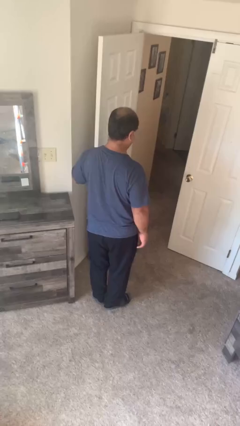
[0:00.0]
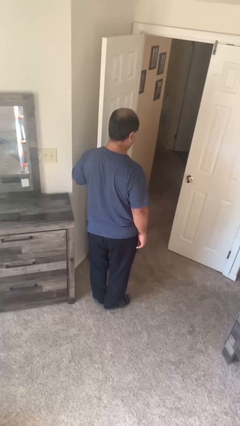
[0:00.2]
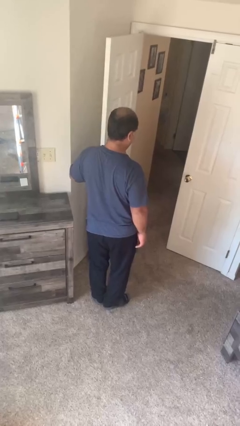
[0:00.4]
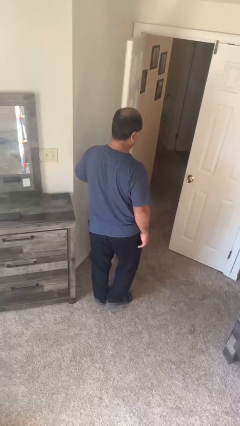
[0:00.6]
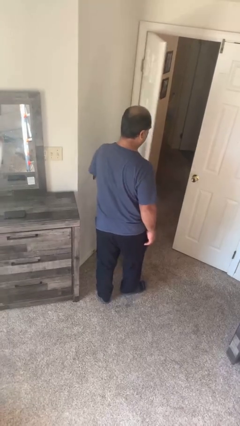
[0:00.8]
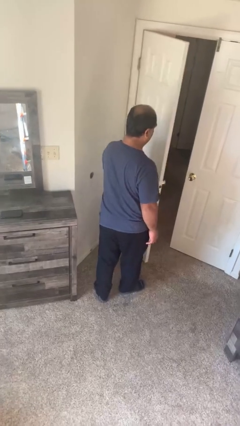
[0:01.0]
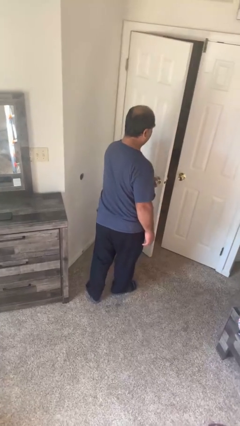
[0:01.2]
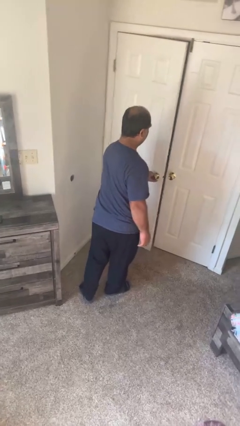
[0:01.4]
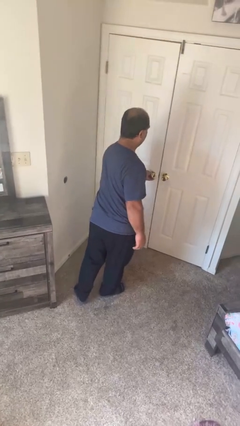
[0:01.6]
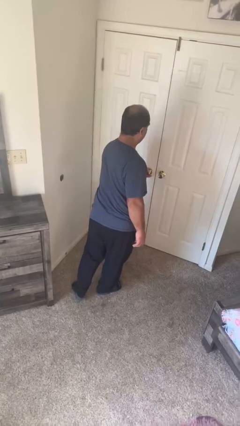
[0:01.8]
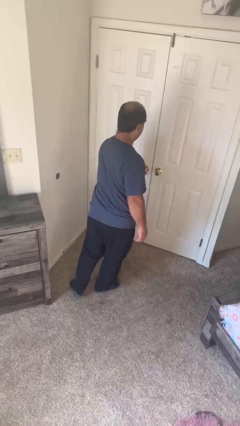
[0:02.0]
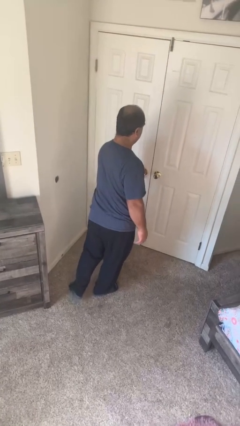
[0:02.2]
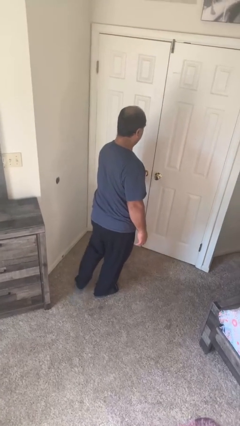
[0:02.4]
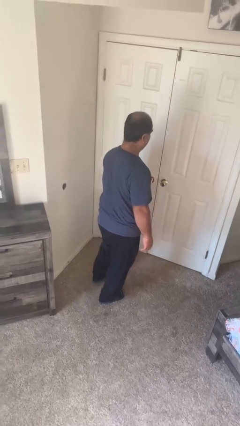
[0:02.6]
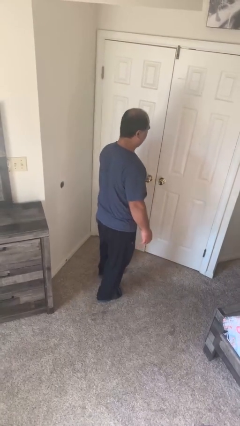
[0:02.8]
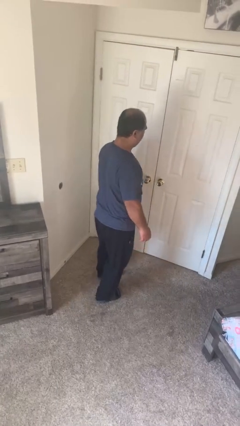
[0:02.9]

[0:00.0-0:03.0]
person closes facility door

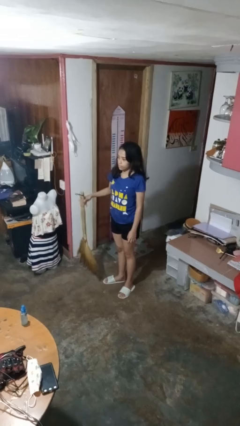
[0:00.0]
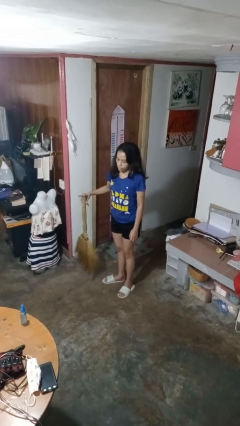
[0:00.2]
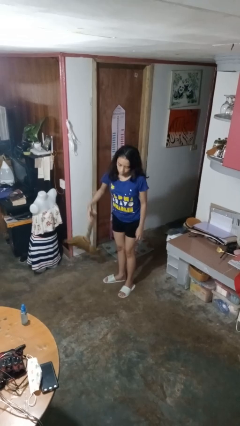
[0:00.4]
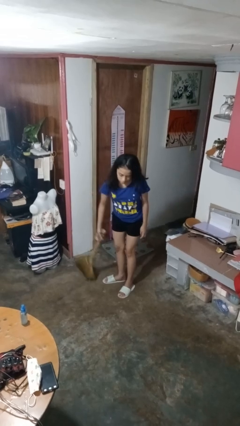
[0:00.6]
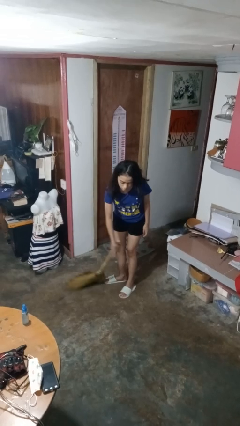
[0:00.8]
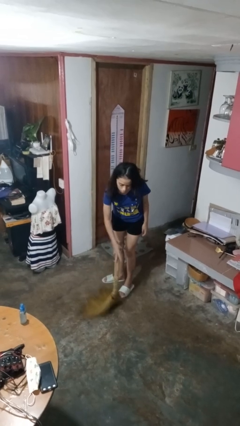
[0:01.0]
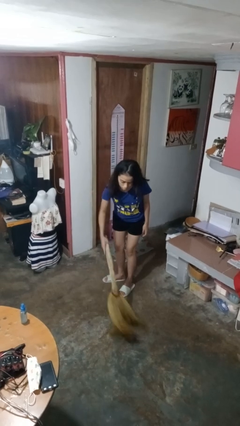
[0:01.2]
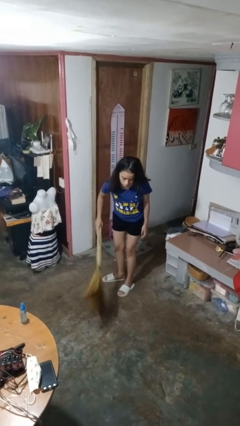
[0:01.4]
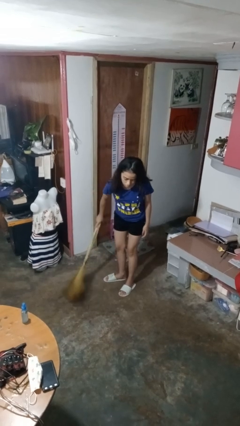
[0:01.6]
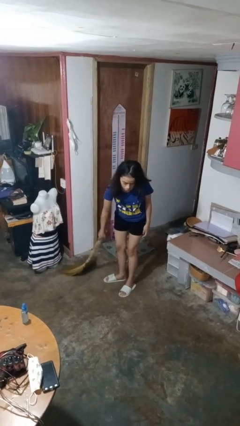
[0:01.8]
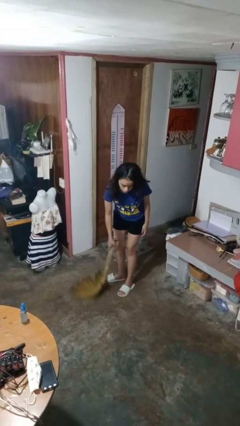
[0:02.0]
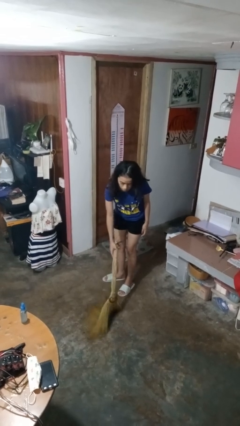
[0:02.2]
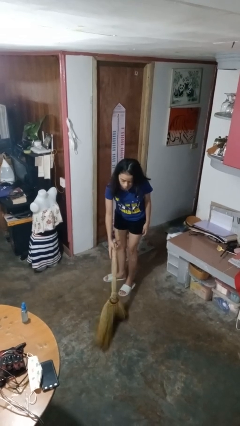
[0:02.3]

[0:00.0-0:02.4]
person sweeps floor

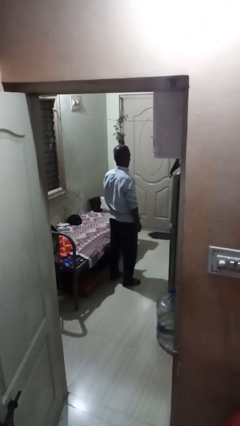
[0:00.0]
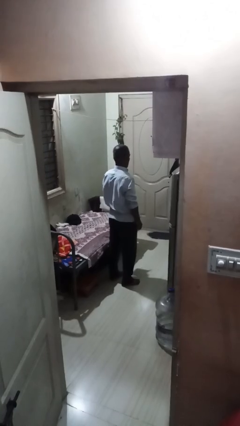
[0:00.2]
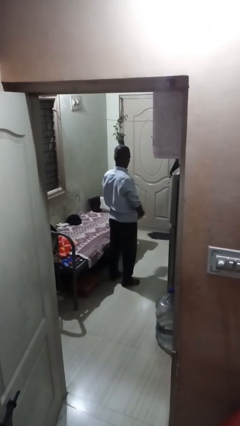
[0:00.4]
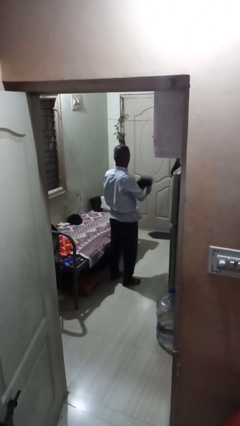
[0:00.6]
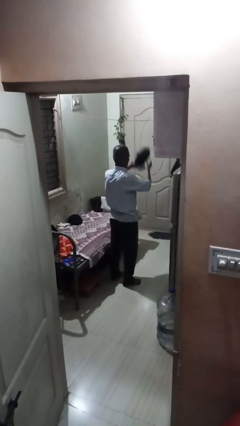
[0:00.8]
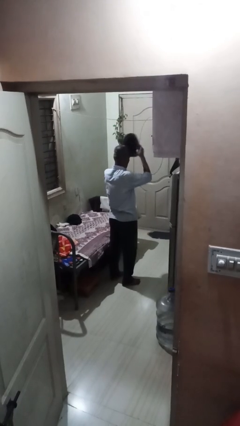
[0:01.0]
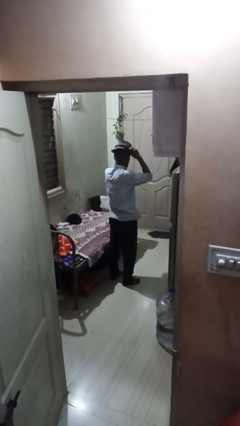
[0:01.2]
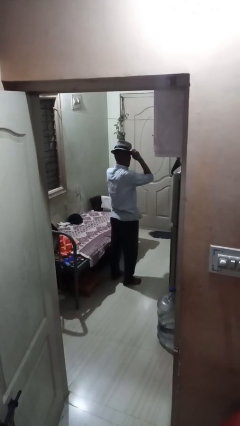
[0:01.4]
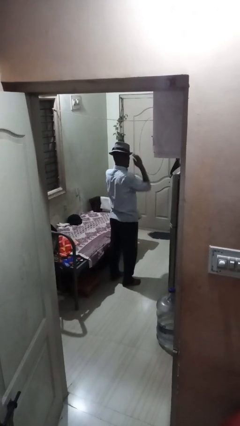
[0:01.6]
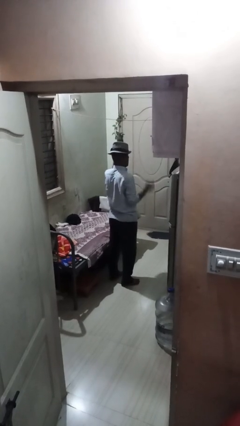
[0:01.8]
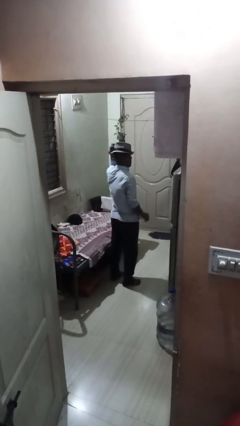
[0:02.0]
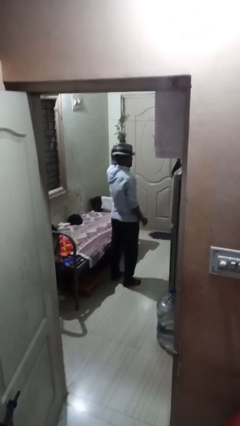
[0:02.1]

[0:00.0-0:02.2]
person puts on hat

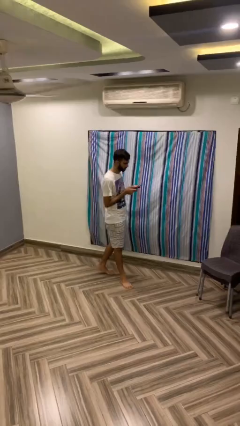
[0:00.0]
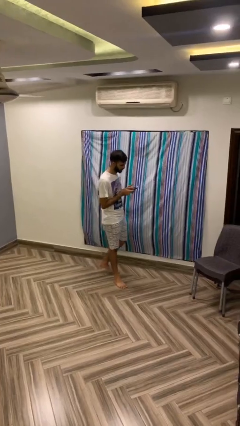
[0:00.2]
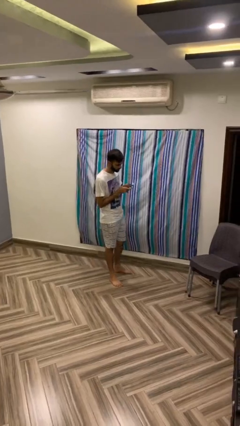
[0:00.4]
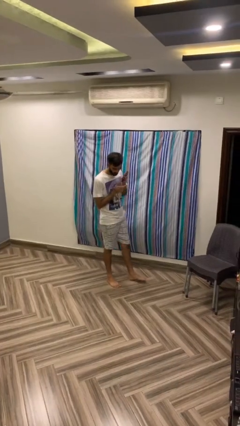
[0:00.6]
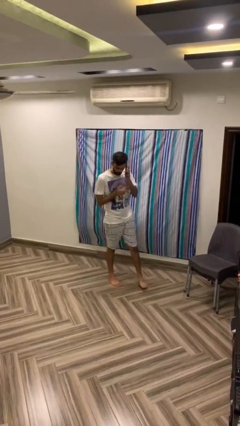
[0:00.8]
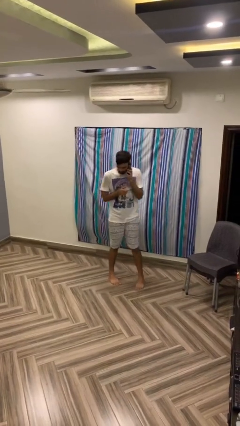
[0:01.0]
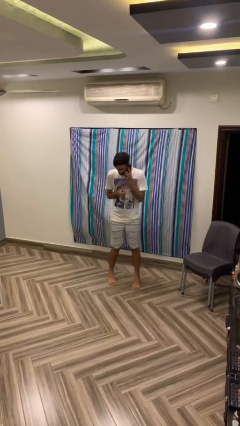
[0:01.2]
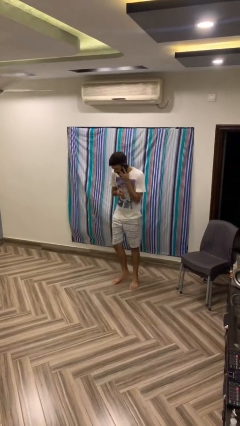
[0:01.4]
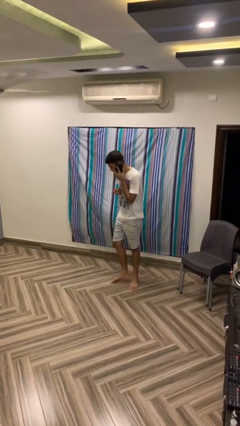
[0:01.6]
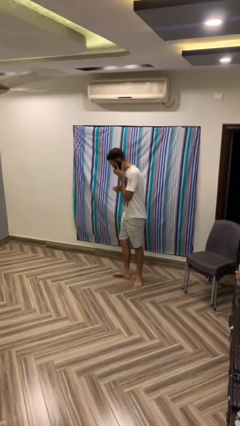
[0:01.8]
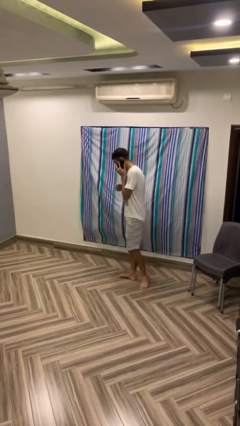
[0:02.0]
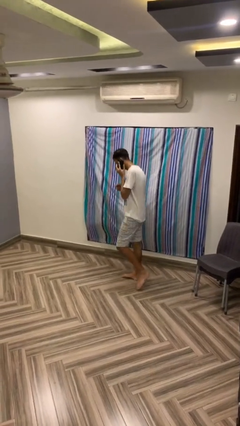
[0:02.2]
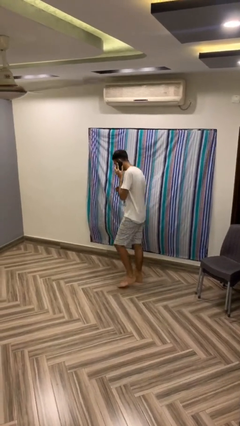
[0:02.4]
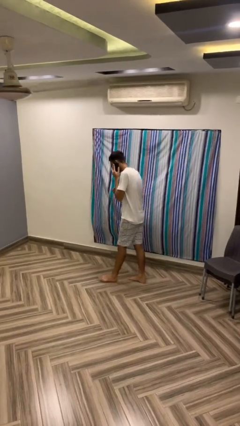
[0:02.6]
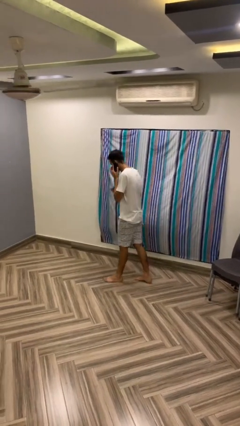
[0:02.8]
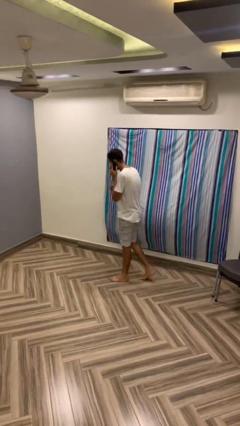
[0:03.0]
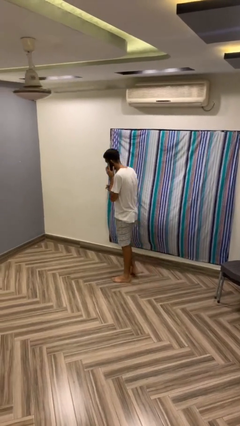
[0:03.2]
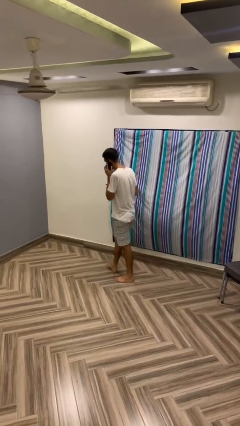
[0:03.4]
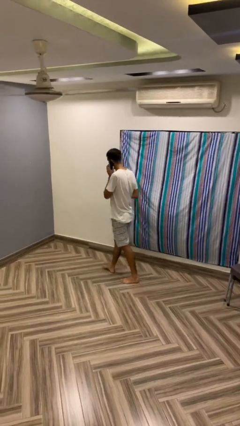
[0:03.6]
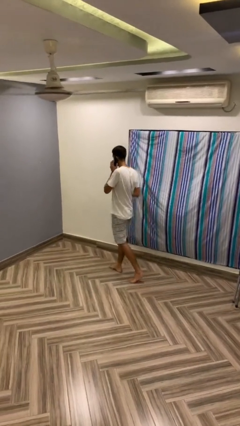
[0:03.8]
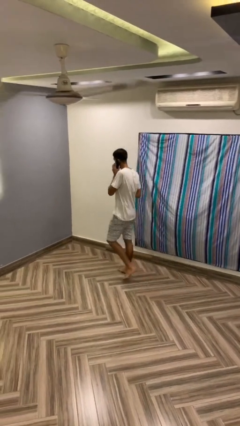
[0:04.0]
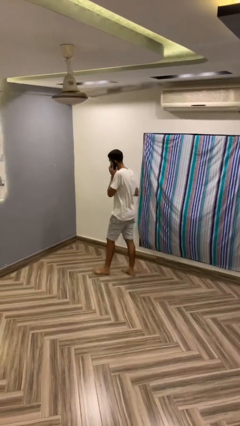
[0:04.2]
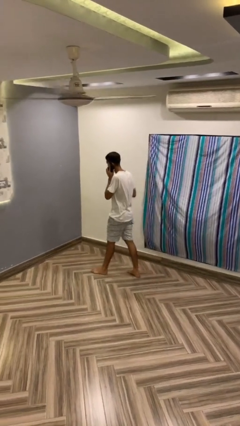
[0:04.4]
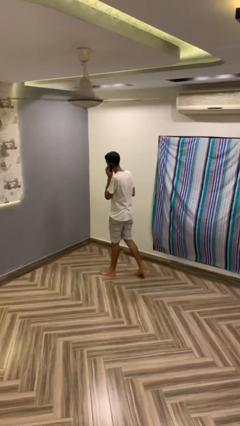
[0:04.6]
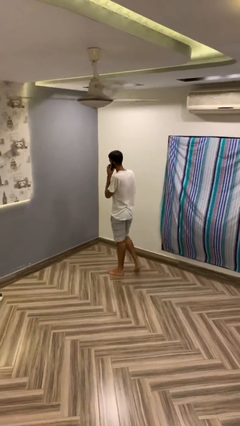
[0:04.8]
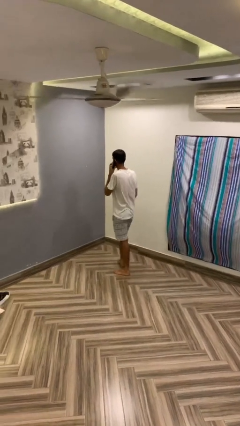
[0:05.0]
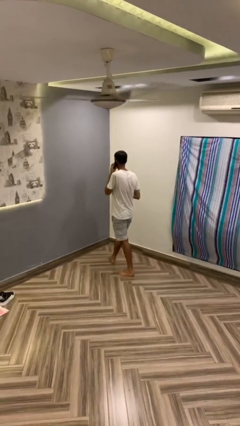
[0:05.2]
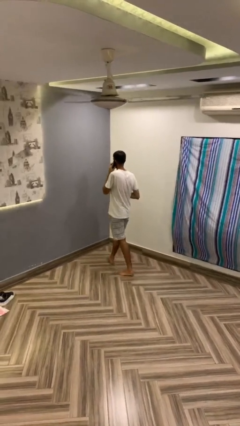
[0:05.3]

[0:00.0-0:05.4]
person talks on phone

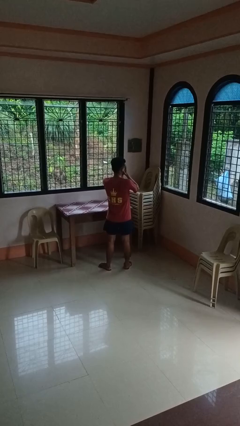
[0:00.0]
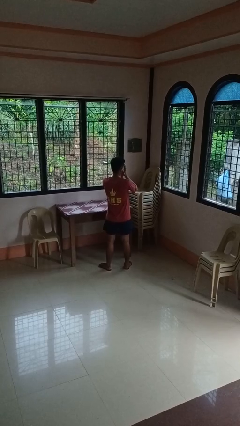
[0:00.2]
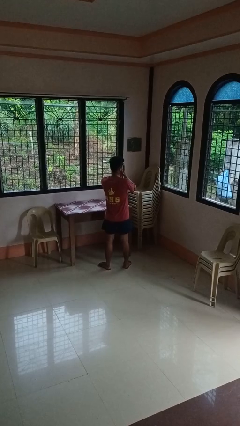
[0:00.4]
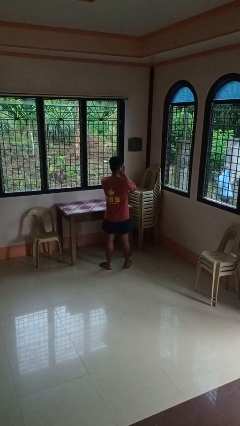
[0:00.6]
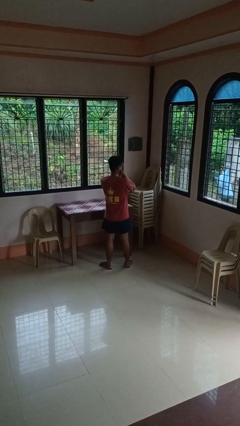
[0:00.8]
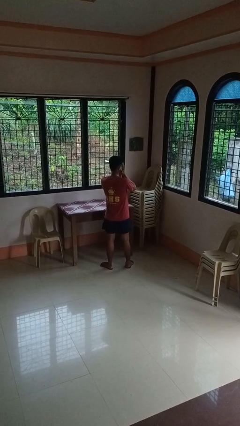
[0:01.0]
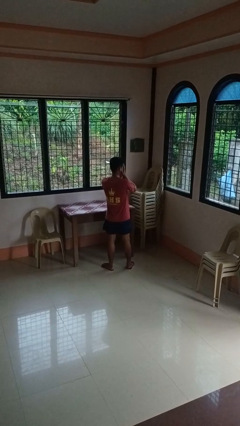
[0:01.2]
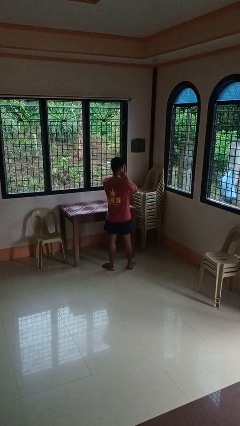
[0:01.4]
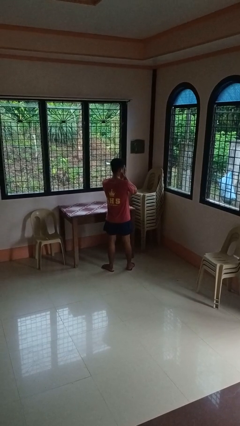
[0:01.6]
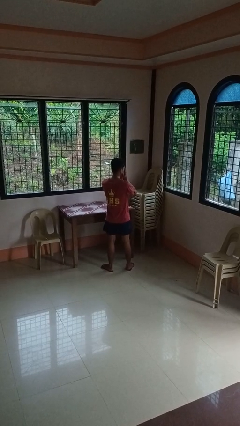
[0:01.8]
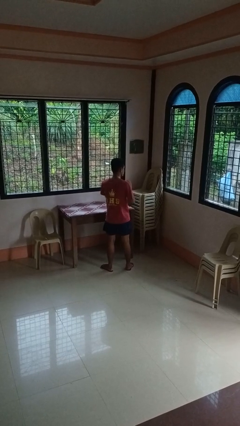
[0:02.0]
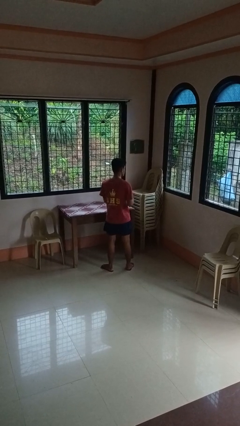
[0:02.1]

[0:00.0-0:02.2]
person covers face with hands

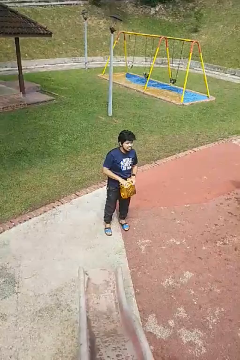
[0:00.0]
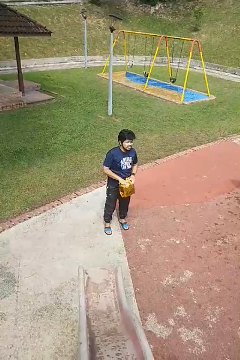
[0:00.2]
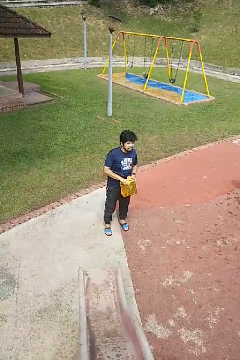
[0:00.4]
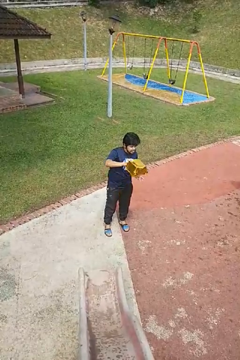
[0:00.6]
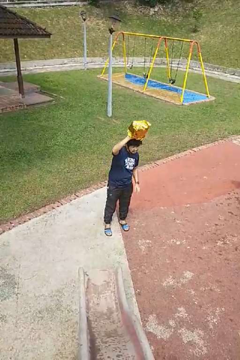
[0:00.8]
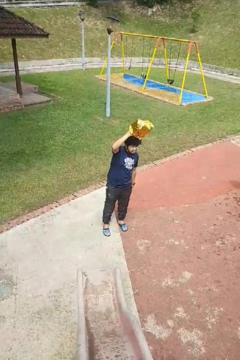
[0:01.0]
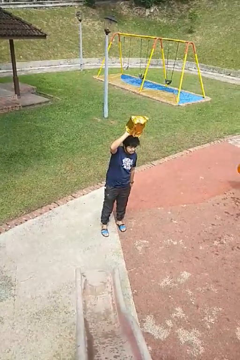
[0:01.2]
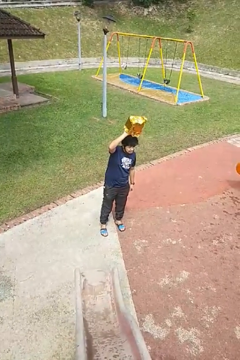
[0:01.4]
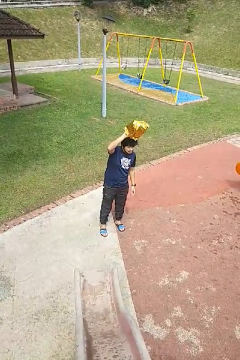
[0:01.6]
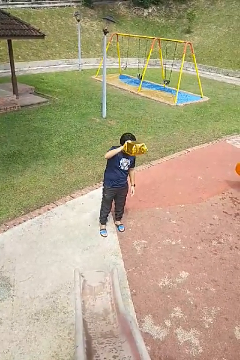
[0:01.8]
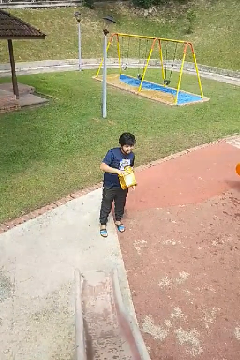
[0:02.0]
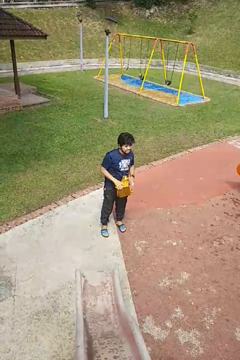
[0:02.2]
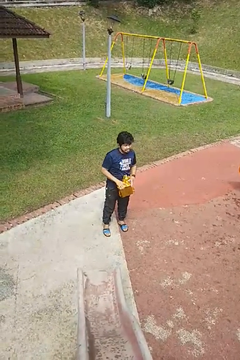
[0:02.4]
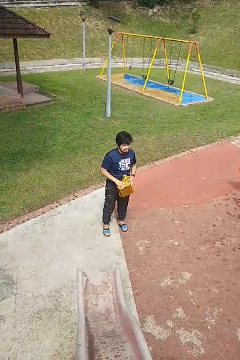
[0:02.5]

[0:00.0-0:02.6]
person holds object above head
